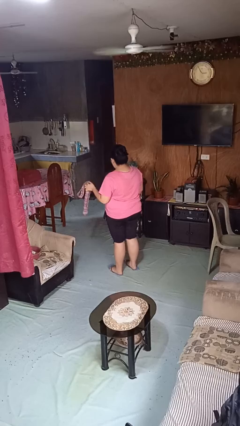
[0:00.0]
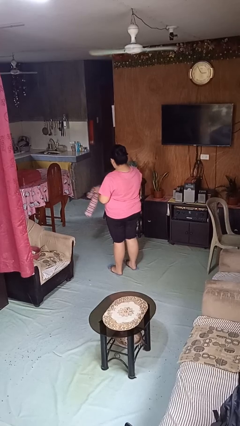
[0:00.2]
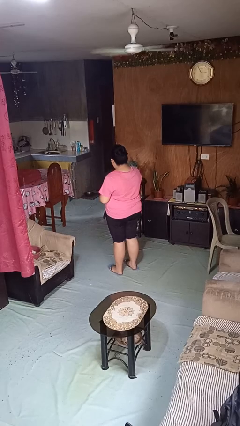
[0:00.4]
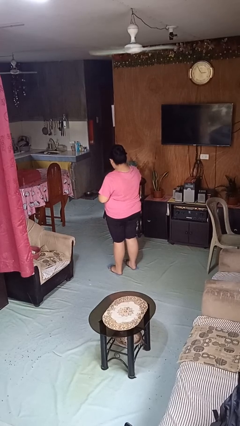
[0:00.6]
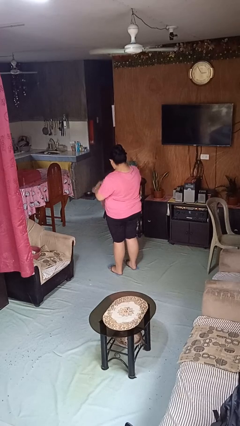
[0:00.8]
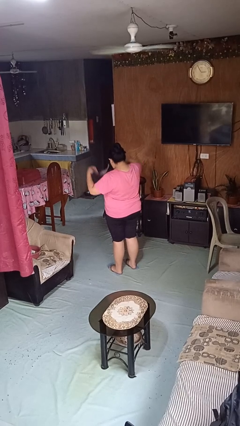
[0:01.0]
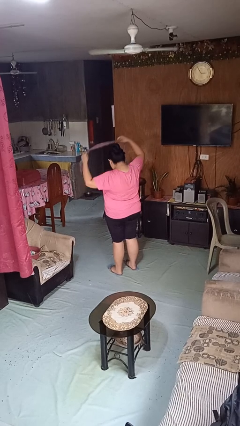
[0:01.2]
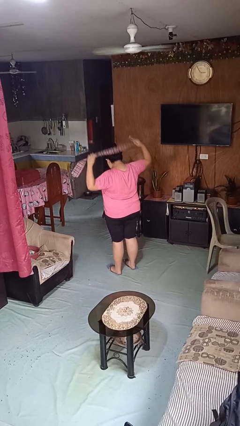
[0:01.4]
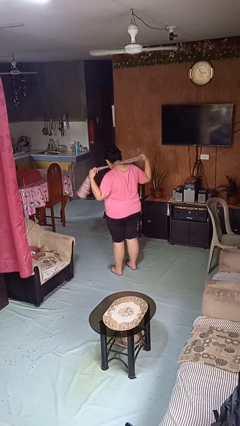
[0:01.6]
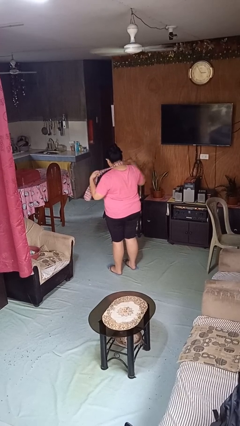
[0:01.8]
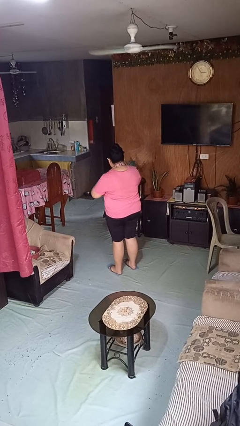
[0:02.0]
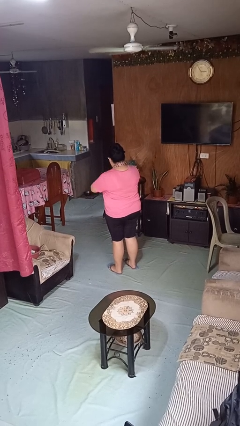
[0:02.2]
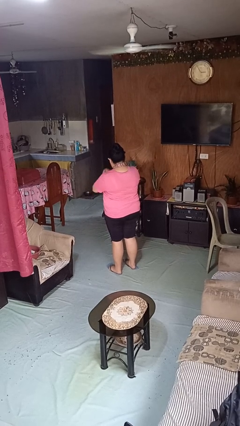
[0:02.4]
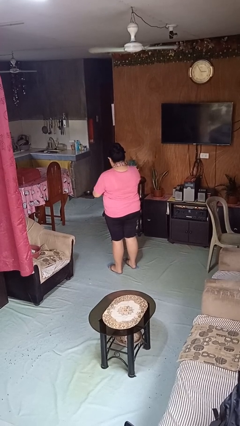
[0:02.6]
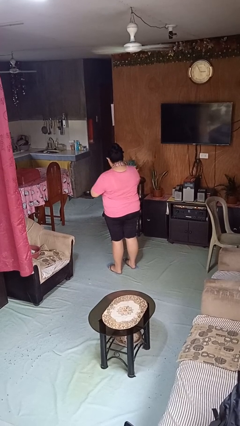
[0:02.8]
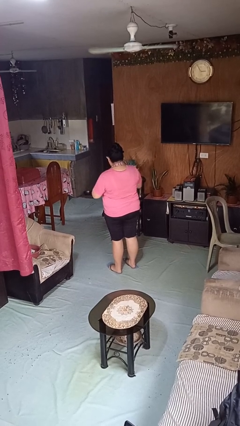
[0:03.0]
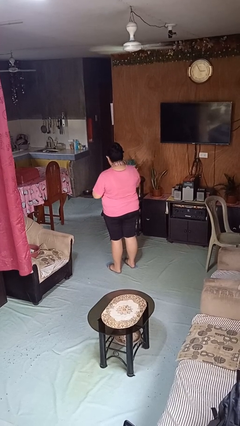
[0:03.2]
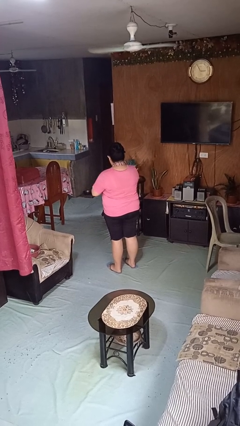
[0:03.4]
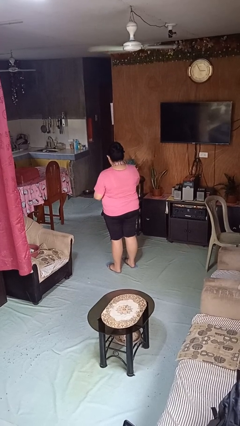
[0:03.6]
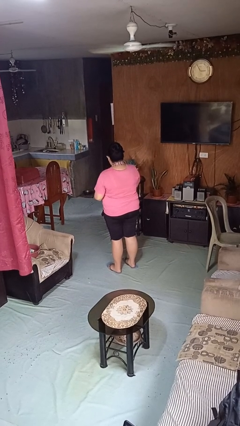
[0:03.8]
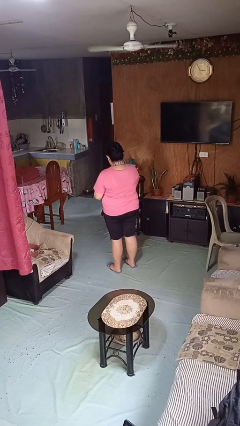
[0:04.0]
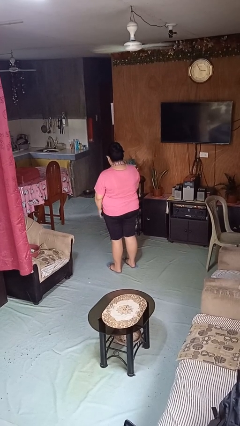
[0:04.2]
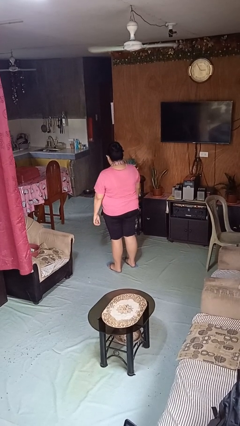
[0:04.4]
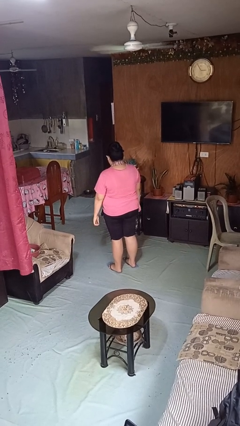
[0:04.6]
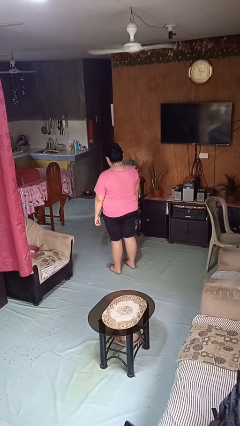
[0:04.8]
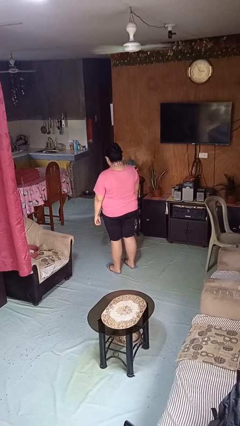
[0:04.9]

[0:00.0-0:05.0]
person puts on necktie

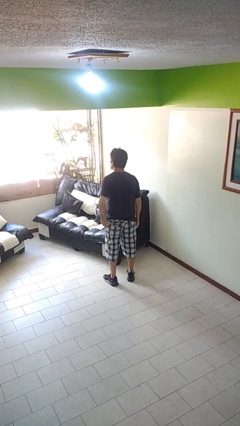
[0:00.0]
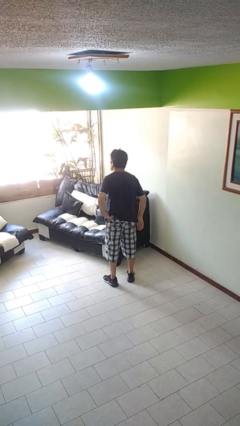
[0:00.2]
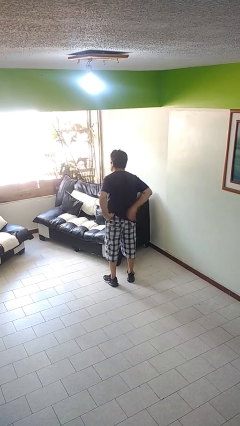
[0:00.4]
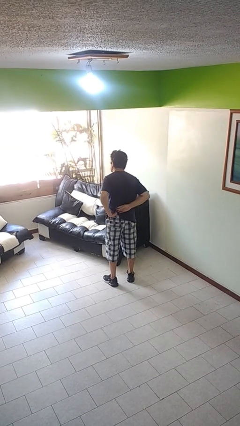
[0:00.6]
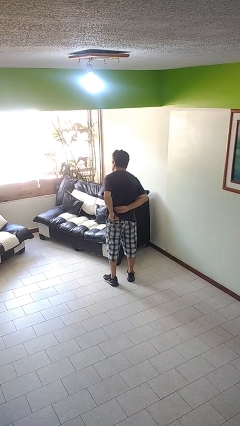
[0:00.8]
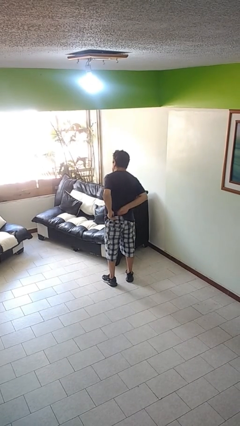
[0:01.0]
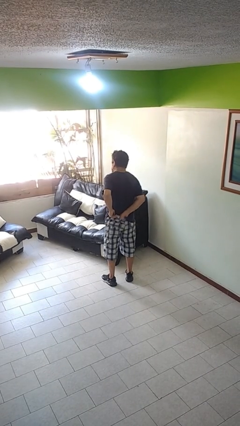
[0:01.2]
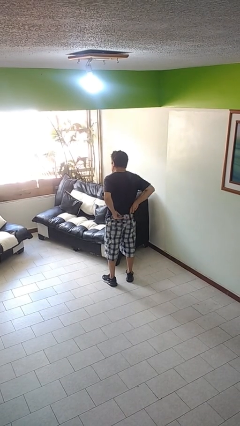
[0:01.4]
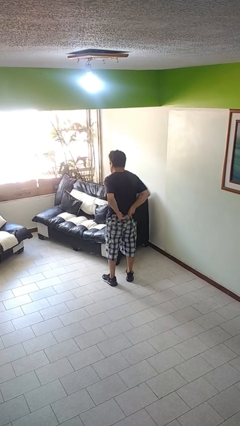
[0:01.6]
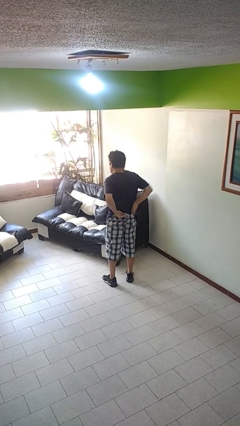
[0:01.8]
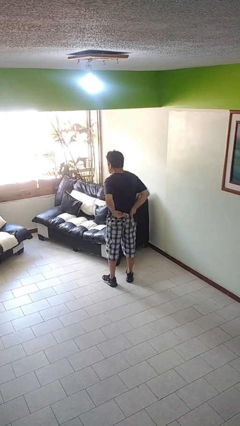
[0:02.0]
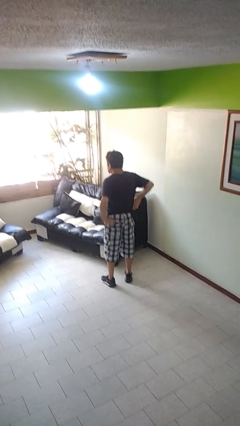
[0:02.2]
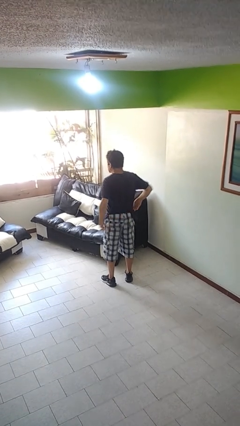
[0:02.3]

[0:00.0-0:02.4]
person tucks in shirt

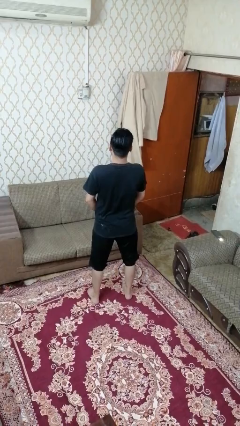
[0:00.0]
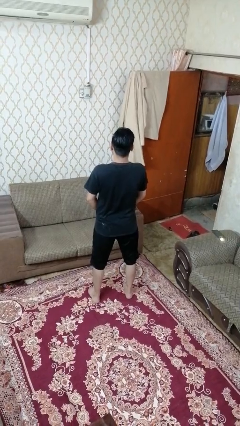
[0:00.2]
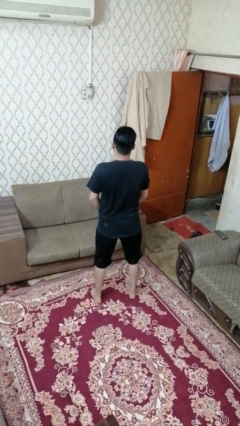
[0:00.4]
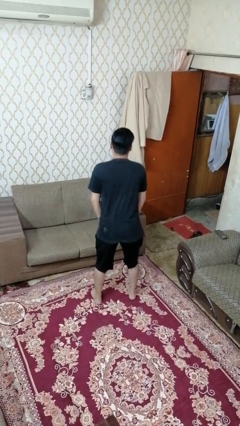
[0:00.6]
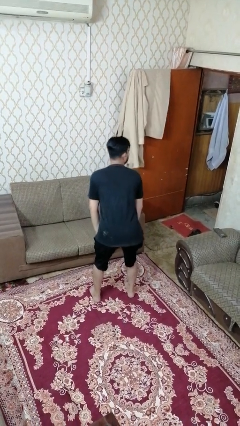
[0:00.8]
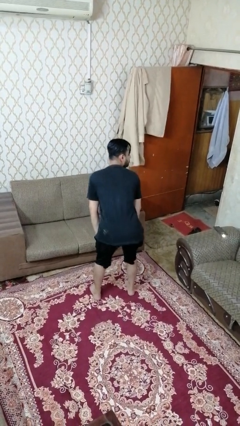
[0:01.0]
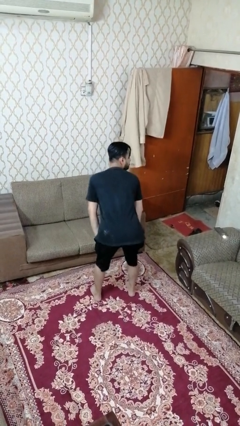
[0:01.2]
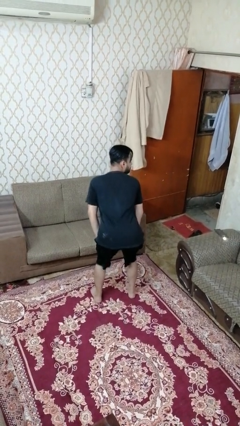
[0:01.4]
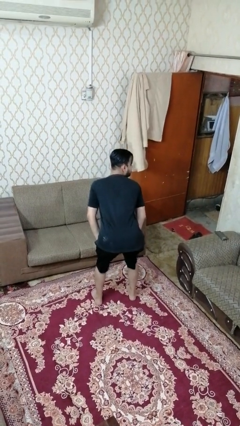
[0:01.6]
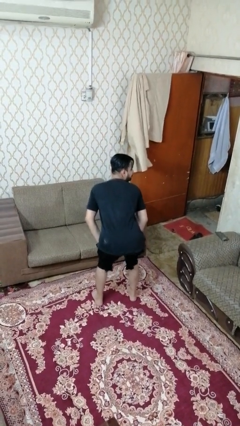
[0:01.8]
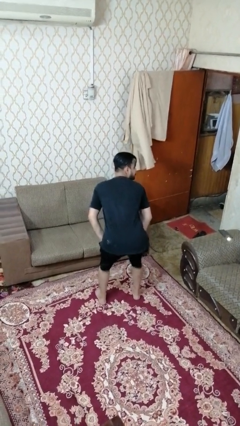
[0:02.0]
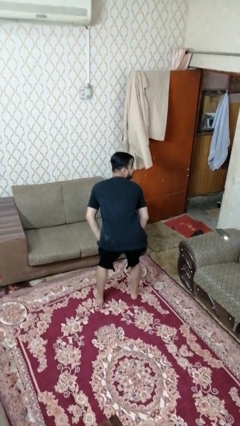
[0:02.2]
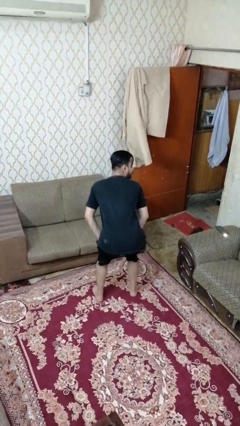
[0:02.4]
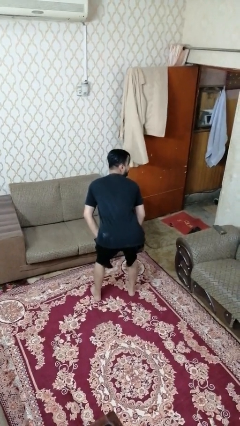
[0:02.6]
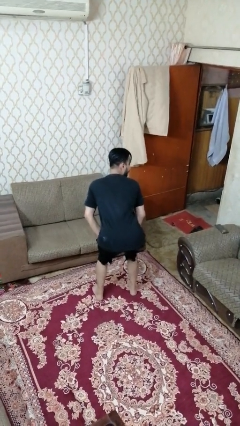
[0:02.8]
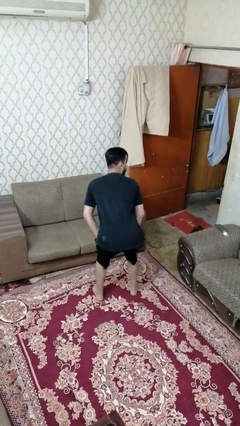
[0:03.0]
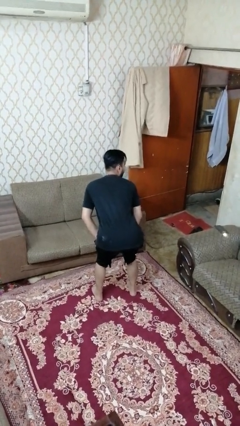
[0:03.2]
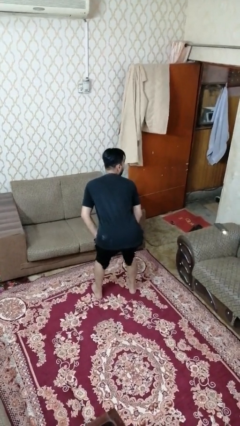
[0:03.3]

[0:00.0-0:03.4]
person wiggles hips

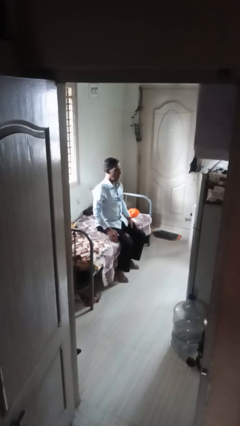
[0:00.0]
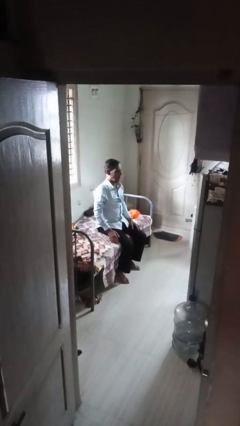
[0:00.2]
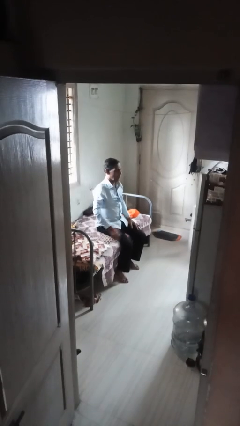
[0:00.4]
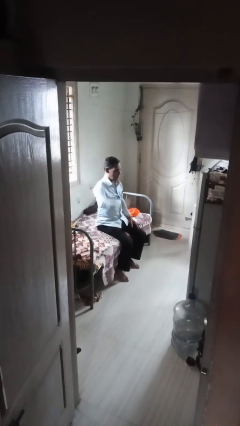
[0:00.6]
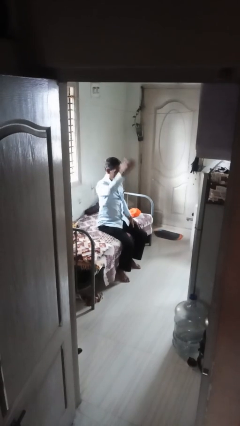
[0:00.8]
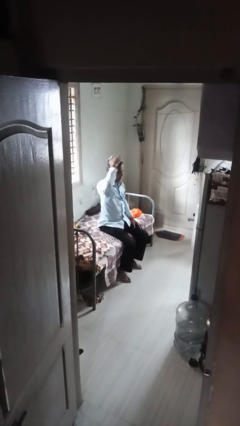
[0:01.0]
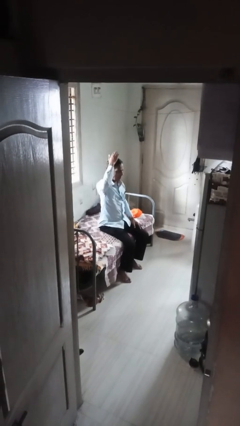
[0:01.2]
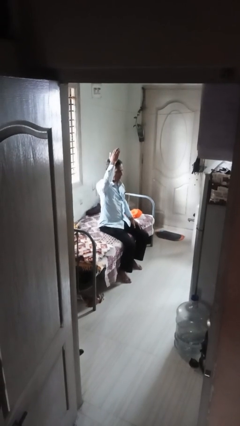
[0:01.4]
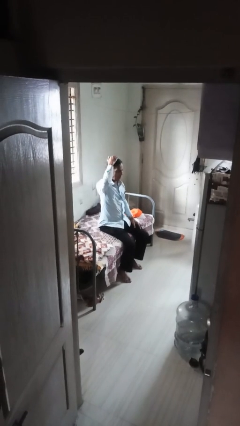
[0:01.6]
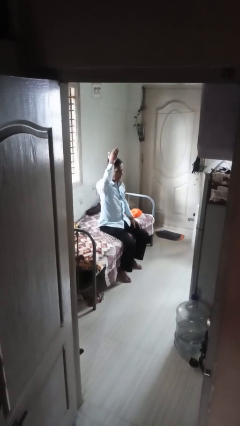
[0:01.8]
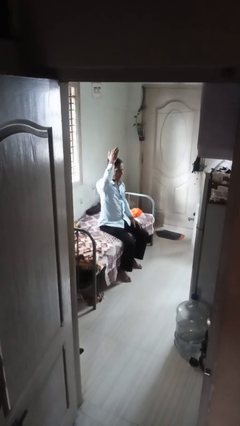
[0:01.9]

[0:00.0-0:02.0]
person pats head

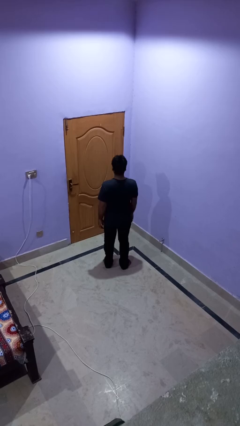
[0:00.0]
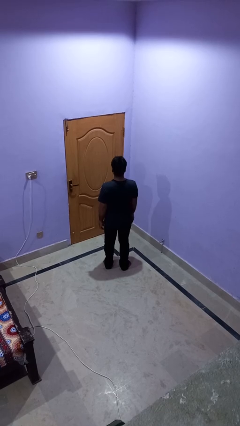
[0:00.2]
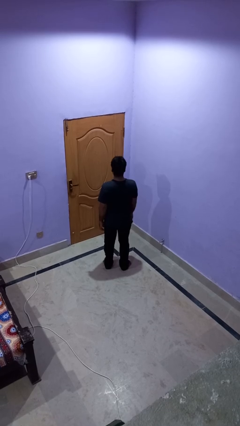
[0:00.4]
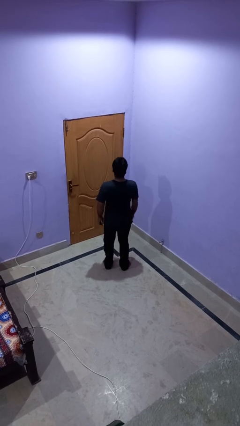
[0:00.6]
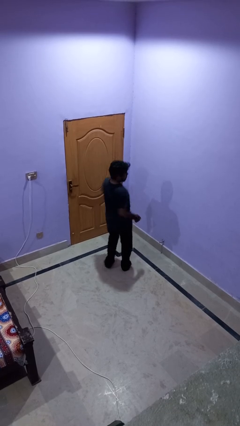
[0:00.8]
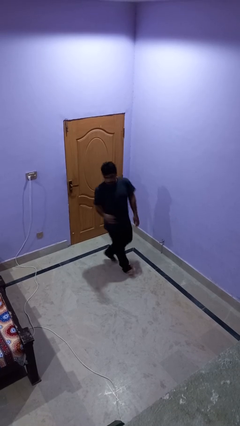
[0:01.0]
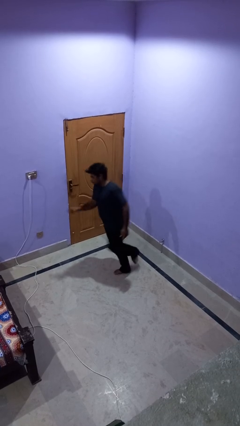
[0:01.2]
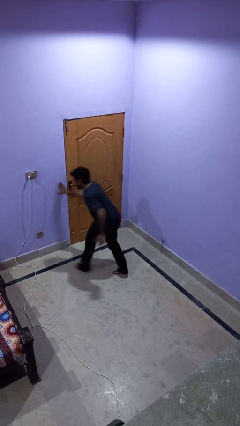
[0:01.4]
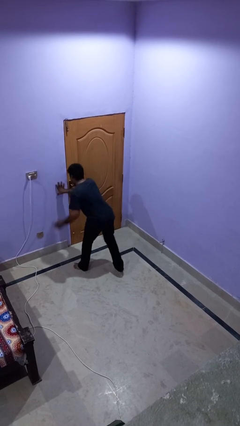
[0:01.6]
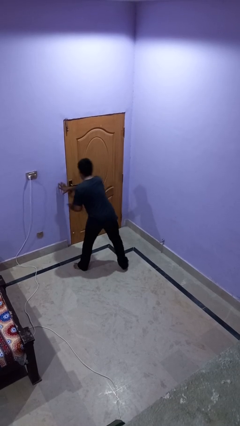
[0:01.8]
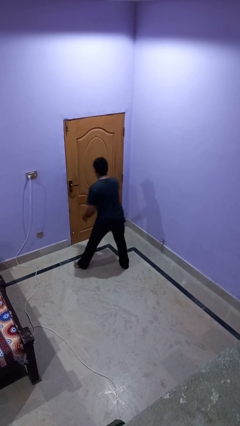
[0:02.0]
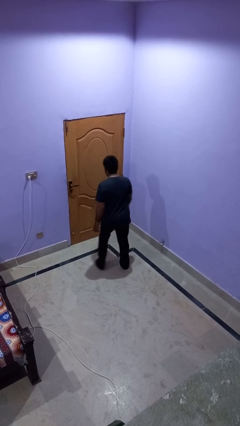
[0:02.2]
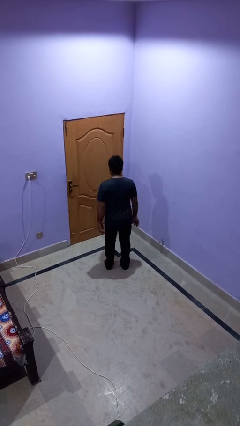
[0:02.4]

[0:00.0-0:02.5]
person twirls

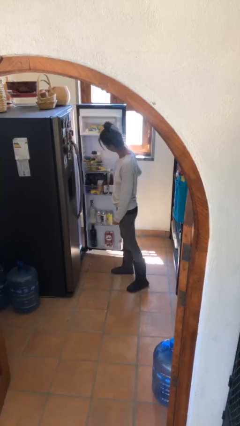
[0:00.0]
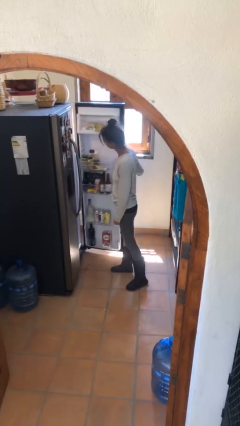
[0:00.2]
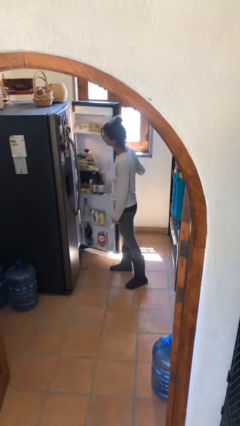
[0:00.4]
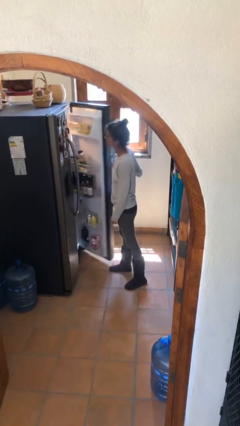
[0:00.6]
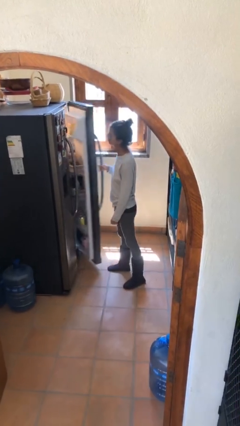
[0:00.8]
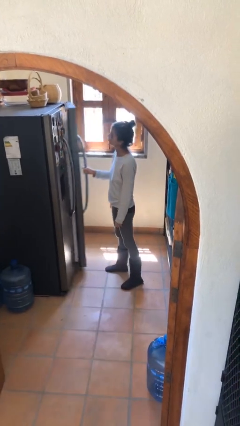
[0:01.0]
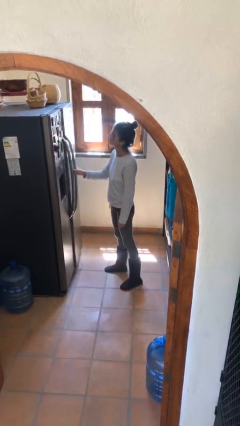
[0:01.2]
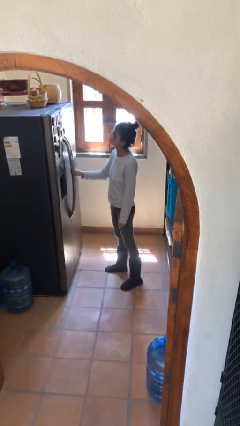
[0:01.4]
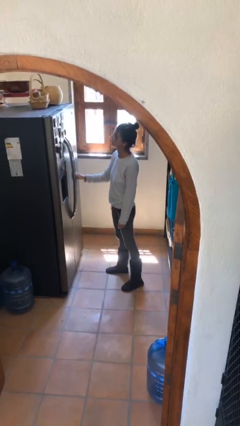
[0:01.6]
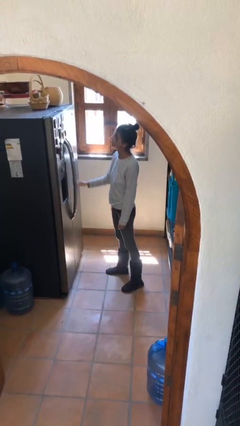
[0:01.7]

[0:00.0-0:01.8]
person closes refrigerator

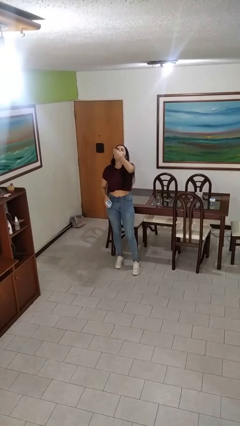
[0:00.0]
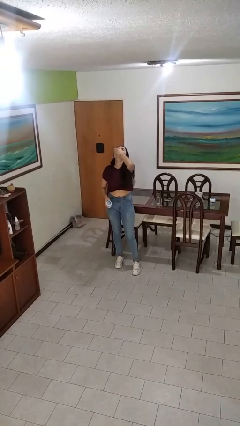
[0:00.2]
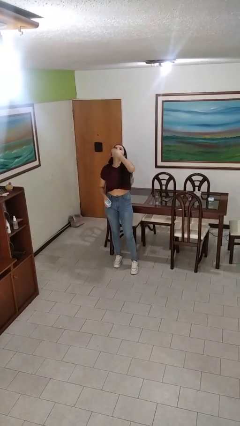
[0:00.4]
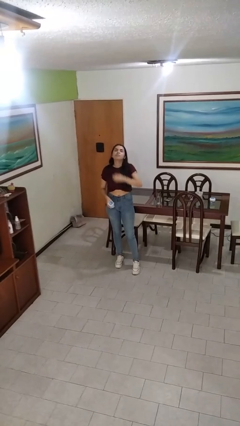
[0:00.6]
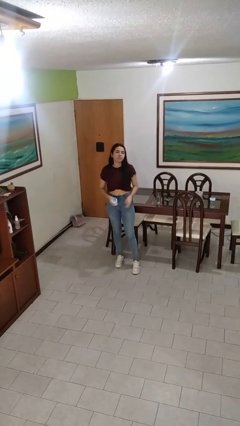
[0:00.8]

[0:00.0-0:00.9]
person takes medicine pills
